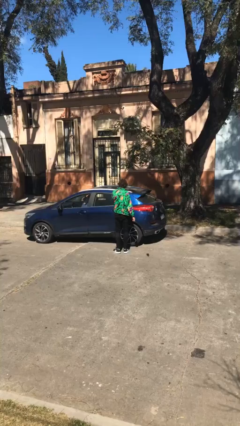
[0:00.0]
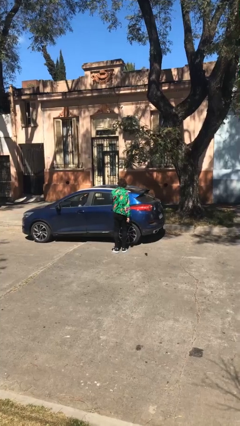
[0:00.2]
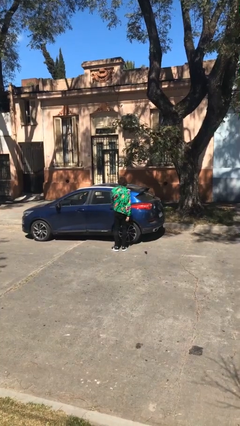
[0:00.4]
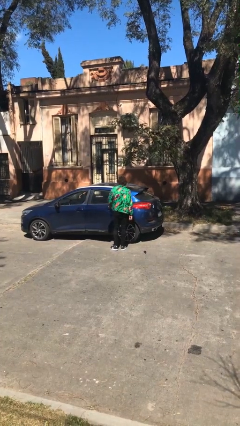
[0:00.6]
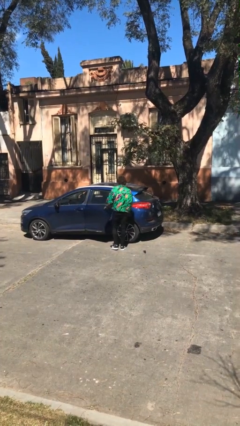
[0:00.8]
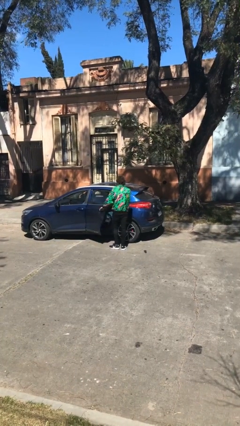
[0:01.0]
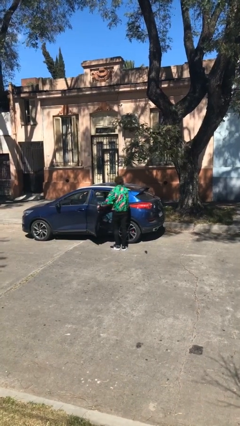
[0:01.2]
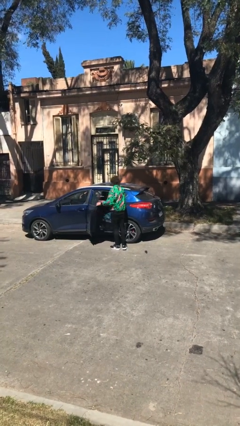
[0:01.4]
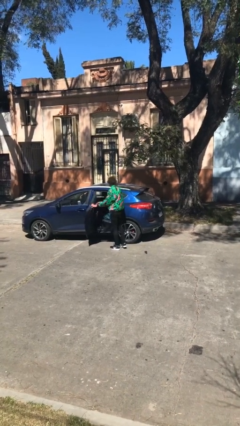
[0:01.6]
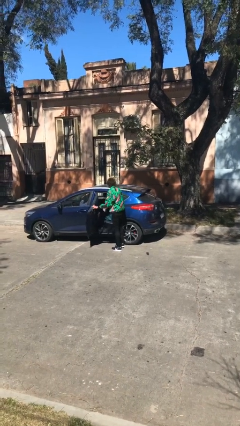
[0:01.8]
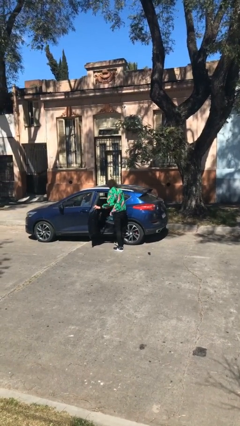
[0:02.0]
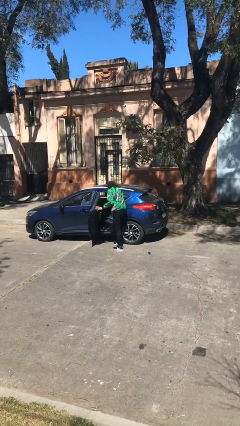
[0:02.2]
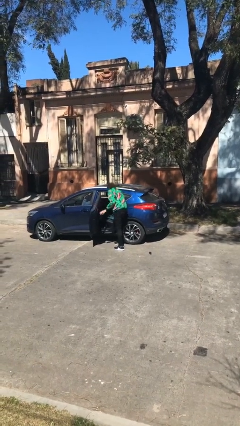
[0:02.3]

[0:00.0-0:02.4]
person opens car door

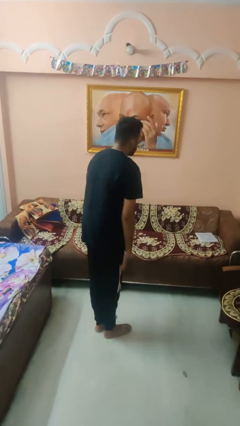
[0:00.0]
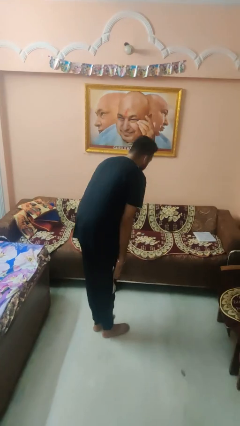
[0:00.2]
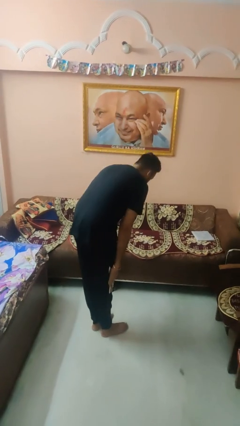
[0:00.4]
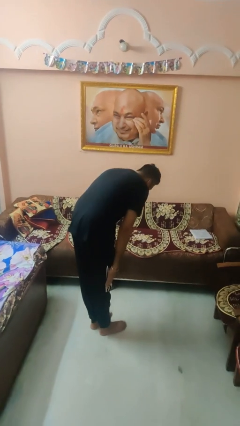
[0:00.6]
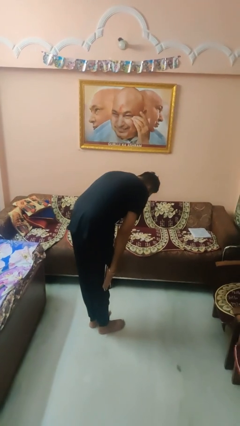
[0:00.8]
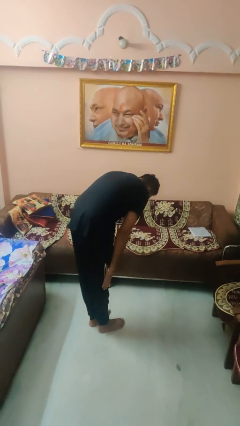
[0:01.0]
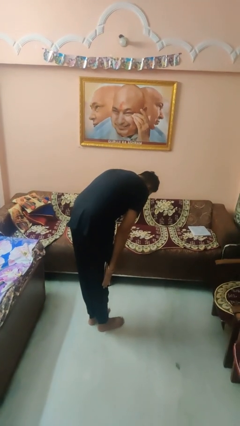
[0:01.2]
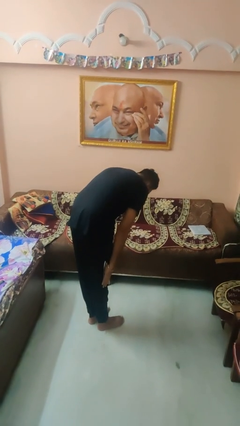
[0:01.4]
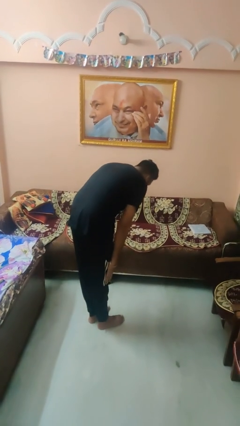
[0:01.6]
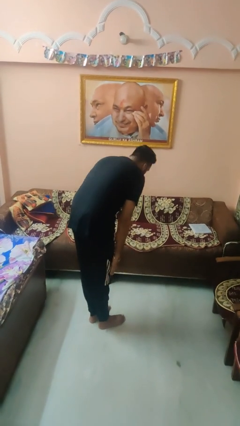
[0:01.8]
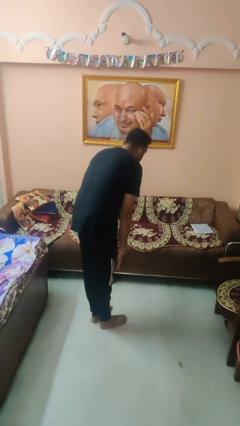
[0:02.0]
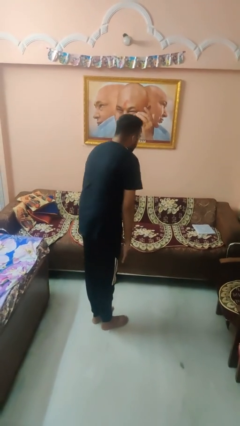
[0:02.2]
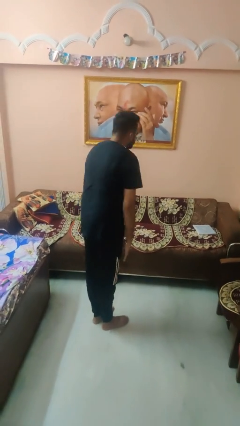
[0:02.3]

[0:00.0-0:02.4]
person bows

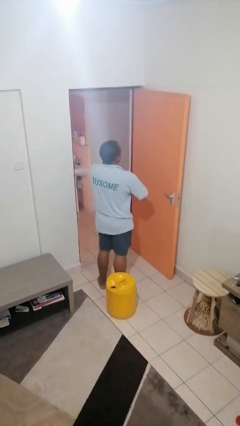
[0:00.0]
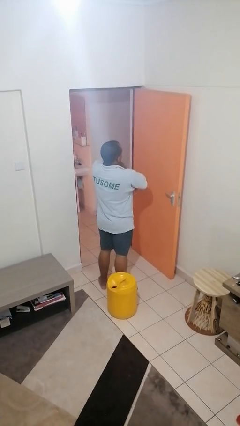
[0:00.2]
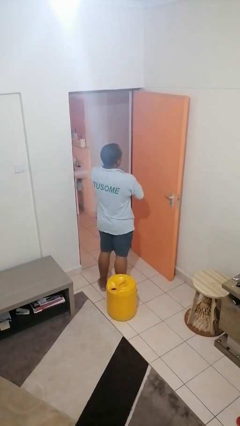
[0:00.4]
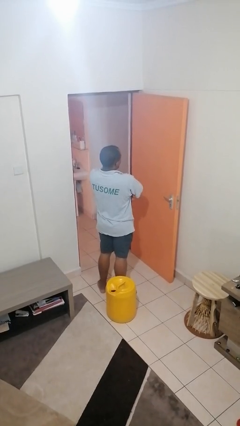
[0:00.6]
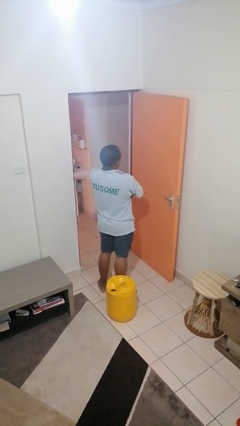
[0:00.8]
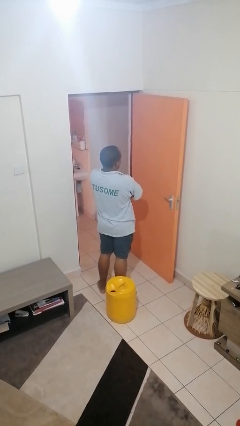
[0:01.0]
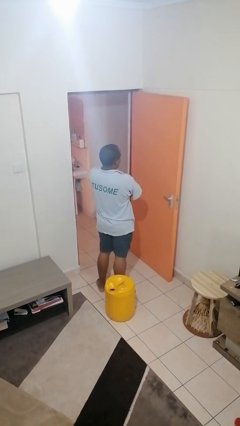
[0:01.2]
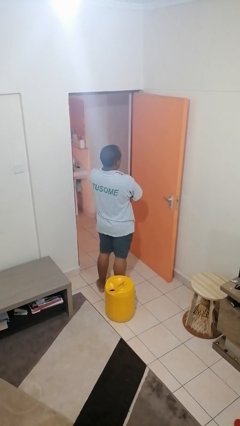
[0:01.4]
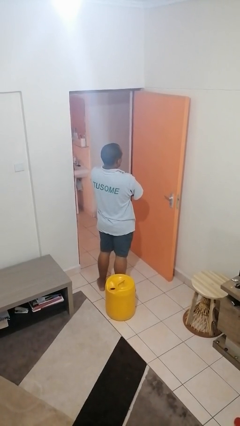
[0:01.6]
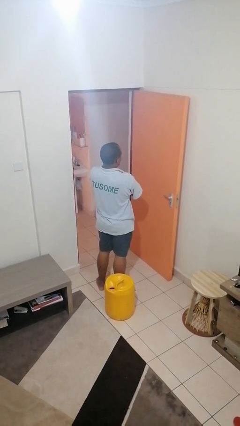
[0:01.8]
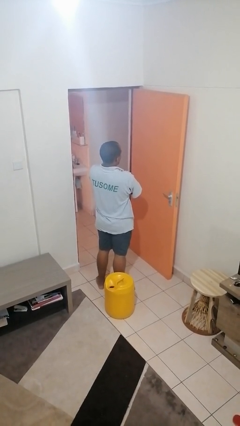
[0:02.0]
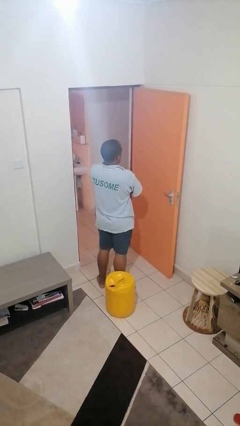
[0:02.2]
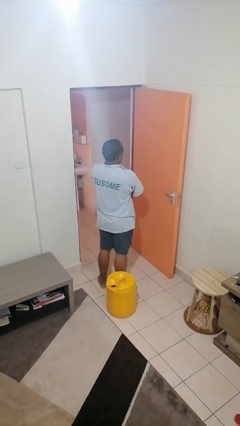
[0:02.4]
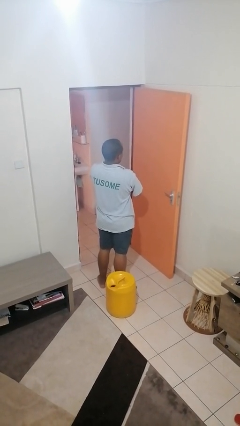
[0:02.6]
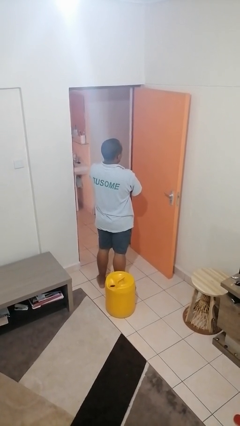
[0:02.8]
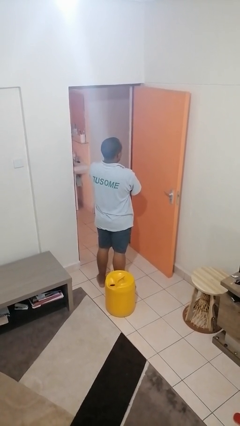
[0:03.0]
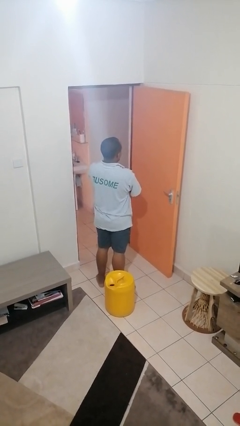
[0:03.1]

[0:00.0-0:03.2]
person crosses arms

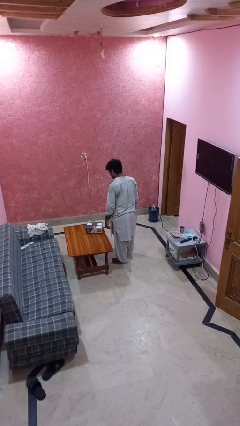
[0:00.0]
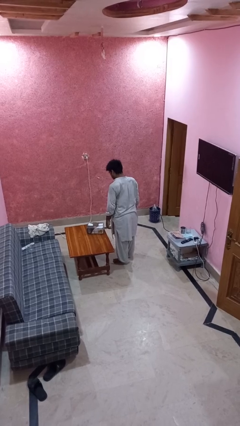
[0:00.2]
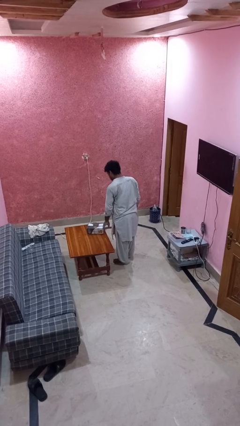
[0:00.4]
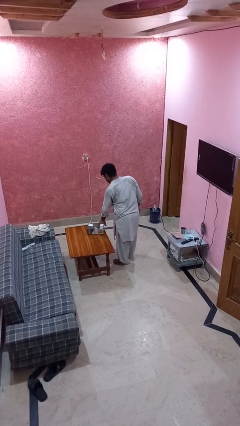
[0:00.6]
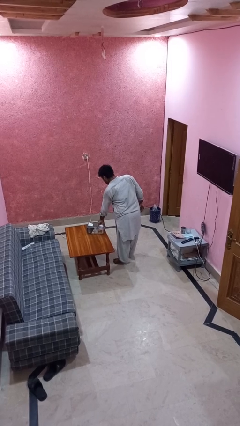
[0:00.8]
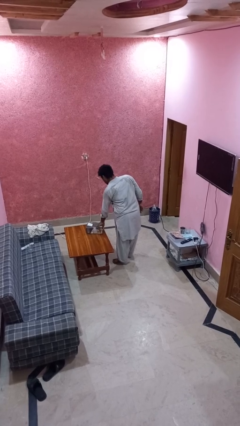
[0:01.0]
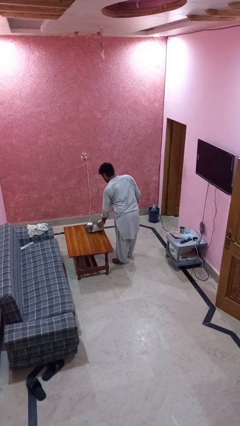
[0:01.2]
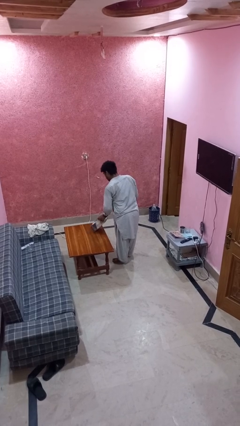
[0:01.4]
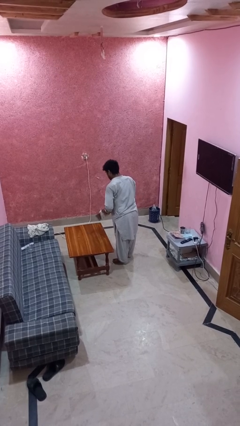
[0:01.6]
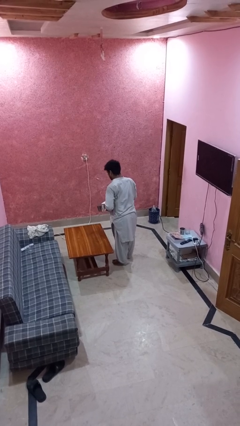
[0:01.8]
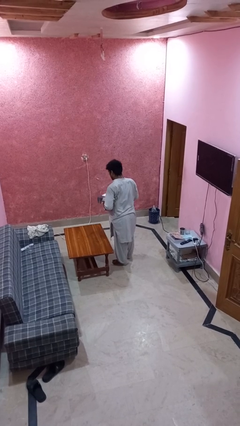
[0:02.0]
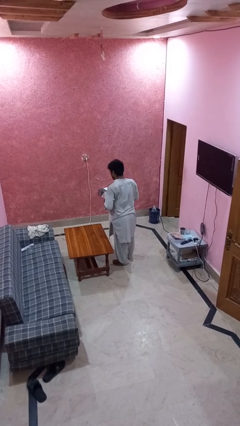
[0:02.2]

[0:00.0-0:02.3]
person picks up object from table

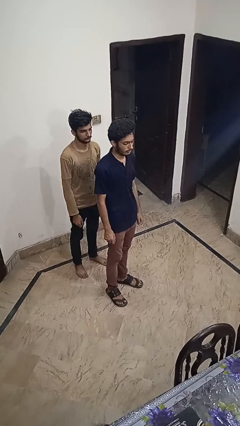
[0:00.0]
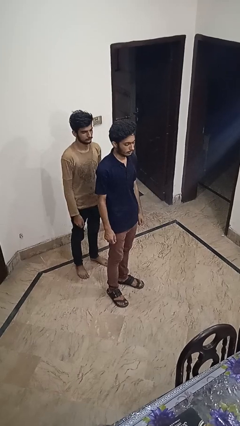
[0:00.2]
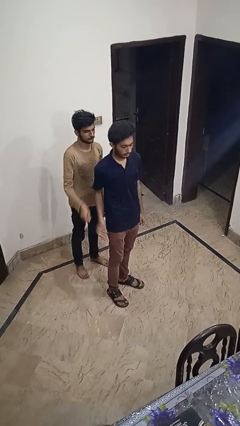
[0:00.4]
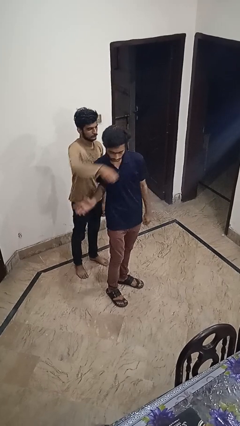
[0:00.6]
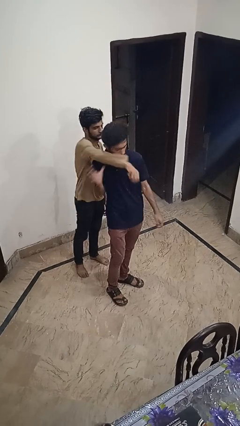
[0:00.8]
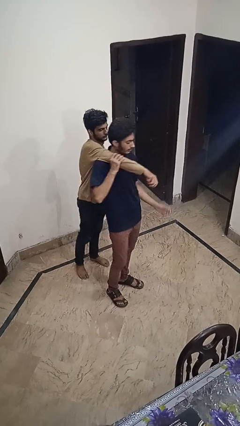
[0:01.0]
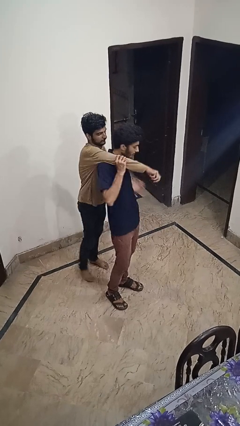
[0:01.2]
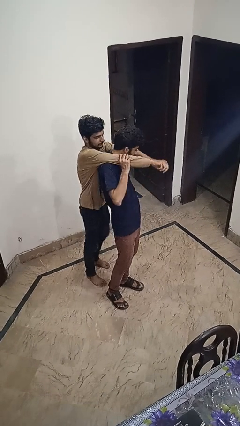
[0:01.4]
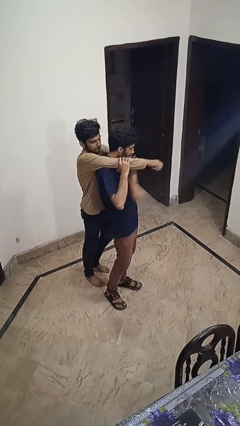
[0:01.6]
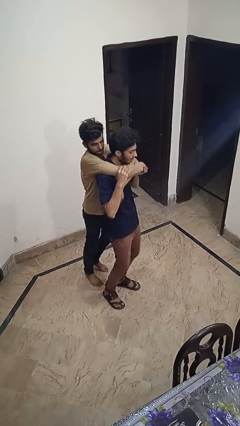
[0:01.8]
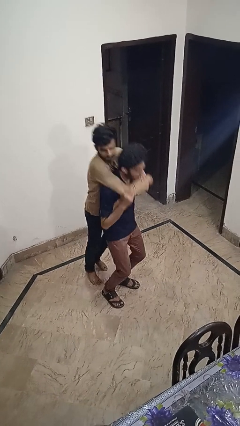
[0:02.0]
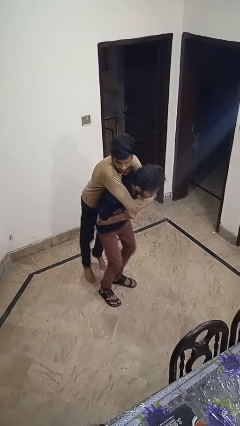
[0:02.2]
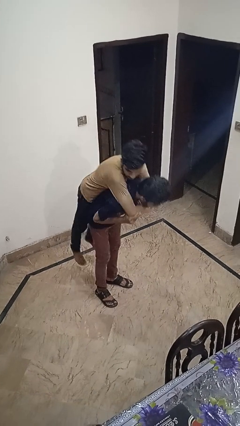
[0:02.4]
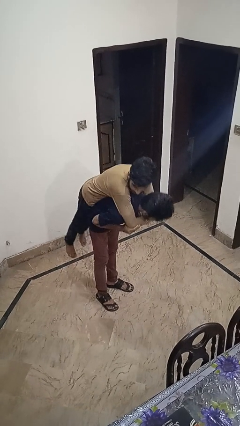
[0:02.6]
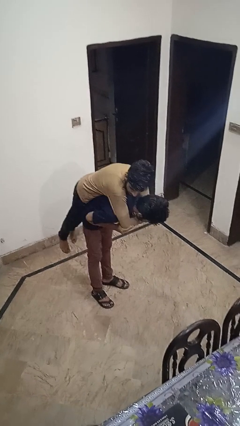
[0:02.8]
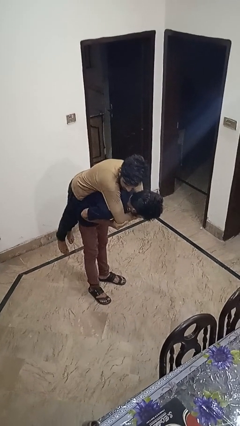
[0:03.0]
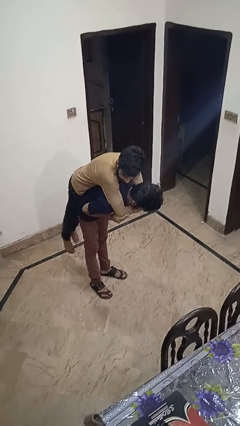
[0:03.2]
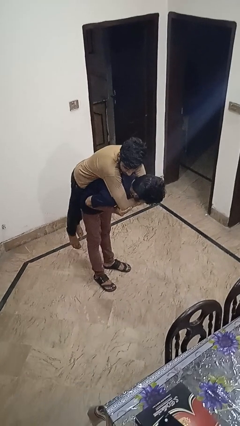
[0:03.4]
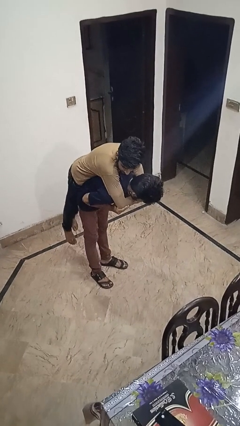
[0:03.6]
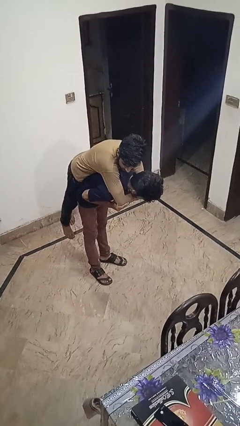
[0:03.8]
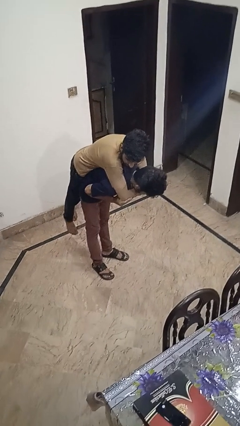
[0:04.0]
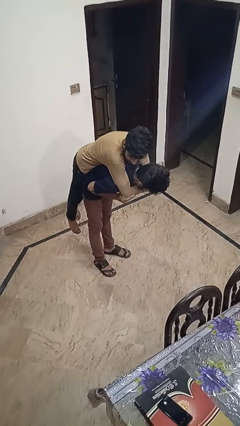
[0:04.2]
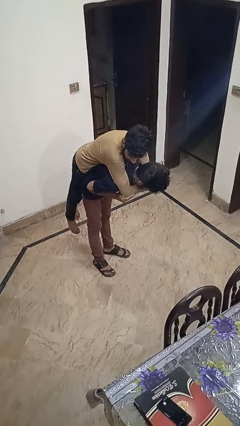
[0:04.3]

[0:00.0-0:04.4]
person carries person over shoulder

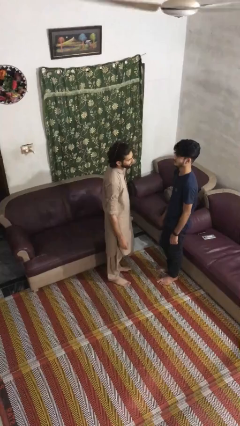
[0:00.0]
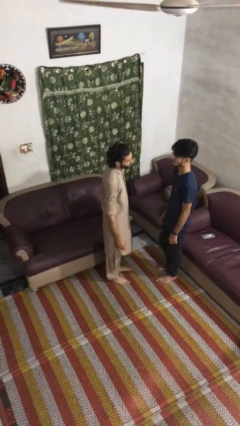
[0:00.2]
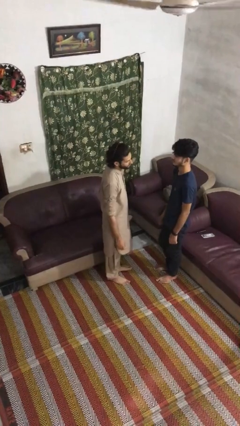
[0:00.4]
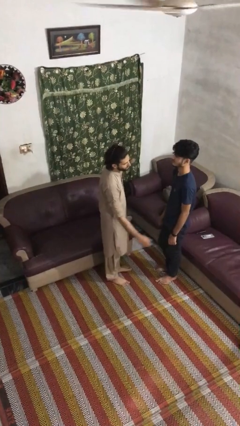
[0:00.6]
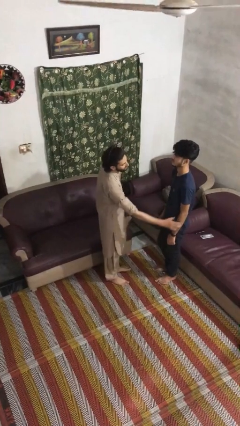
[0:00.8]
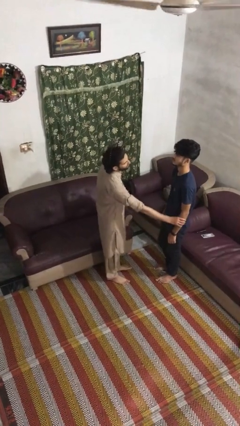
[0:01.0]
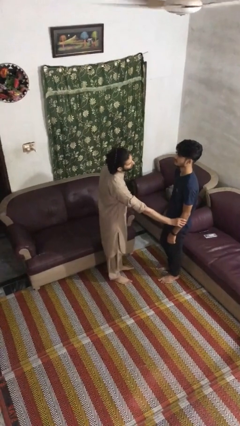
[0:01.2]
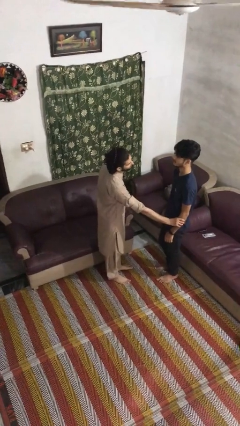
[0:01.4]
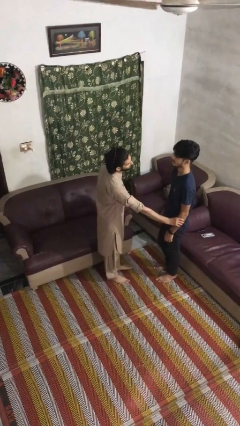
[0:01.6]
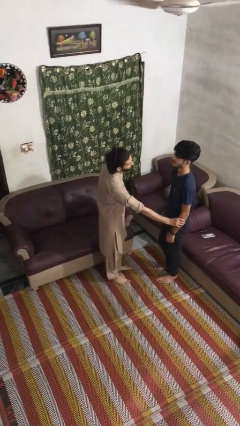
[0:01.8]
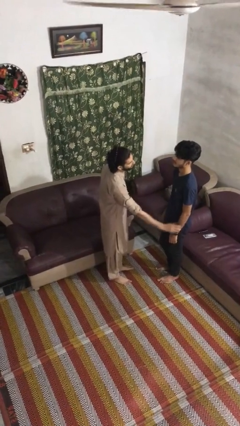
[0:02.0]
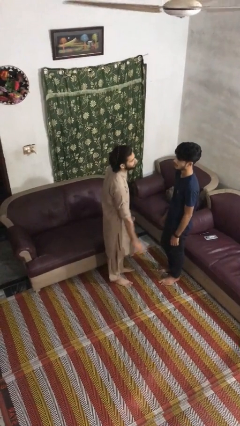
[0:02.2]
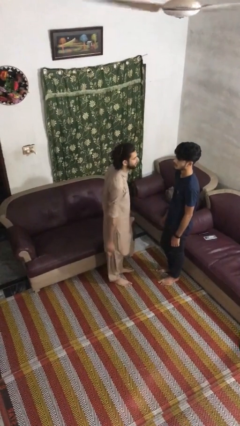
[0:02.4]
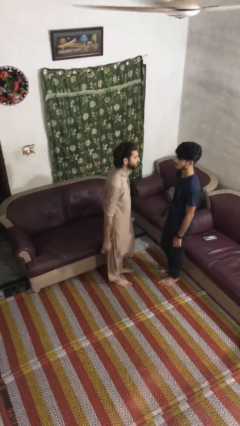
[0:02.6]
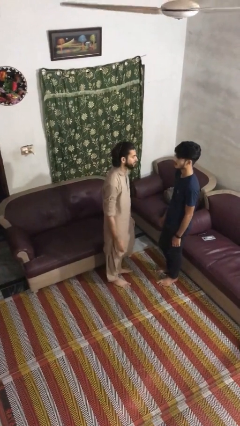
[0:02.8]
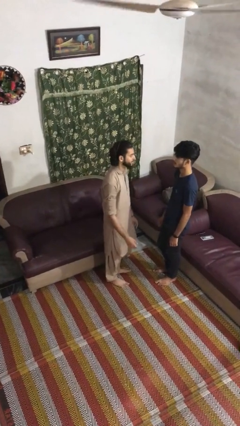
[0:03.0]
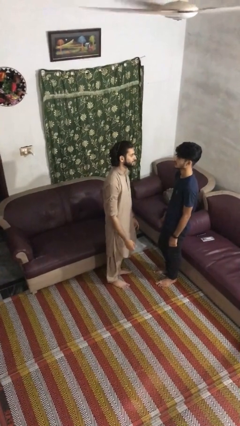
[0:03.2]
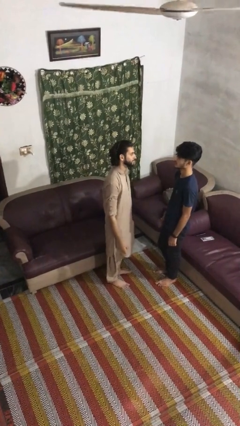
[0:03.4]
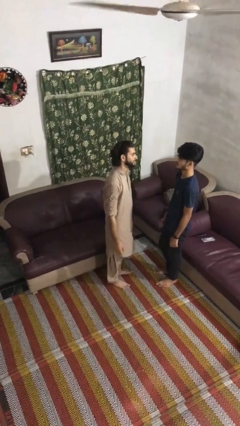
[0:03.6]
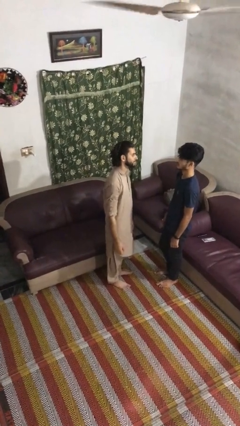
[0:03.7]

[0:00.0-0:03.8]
person grabs person by forearm
